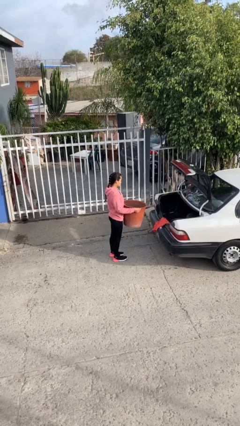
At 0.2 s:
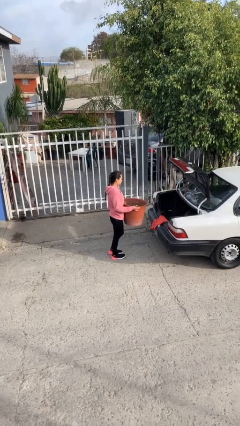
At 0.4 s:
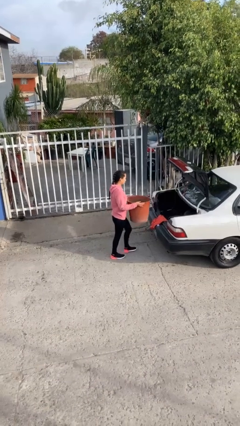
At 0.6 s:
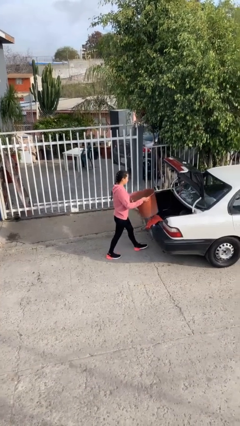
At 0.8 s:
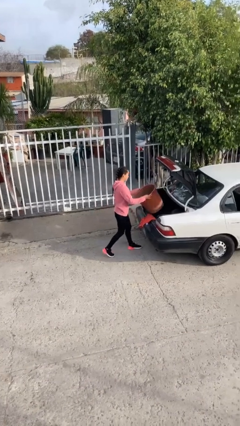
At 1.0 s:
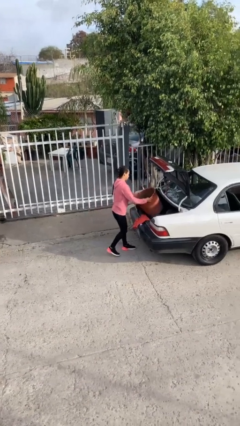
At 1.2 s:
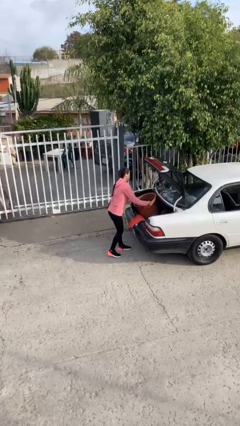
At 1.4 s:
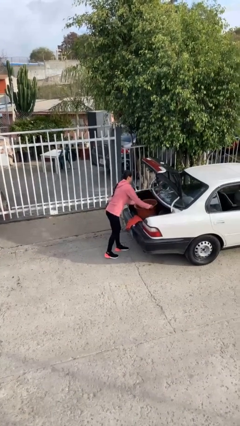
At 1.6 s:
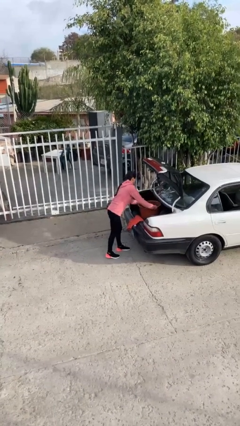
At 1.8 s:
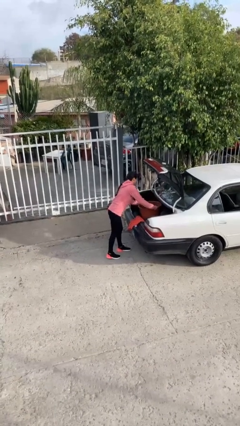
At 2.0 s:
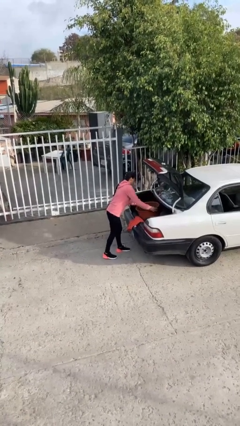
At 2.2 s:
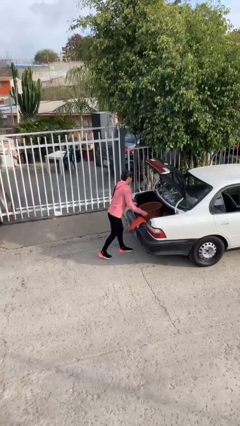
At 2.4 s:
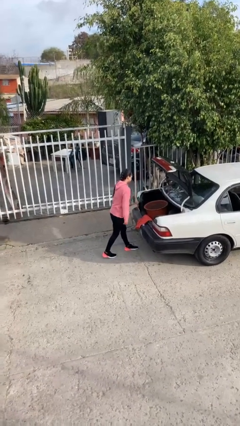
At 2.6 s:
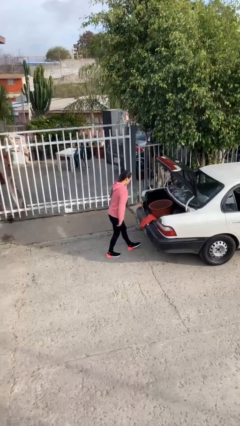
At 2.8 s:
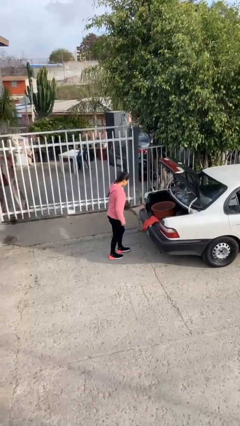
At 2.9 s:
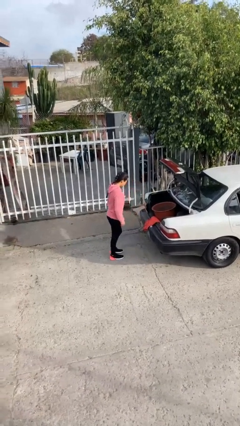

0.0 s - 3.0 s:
person loads car

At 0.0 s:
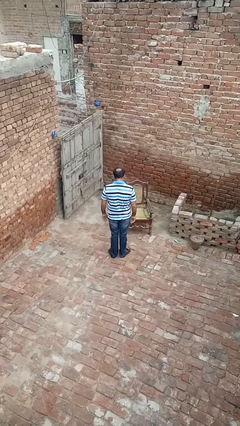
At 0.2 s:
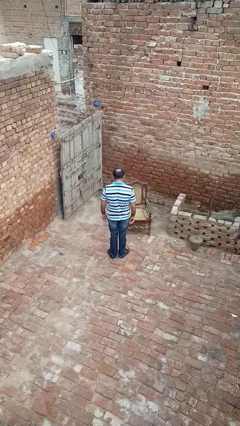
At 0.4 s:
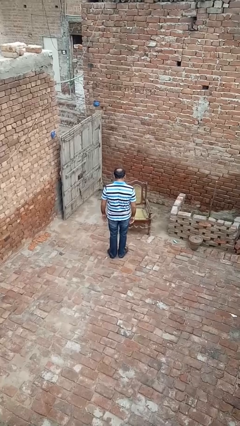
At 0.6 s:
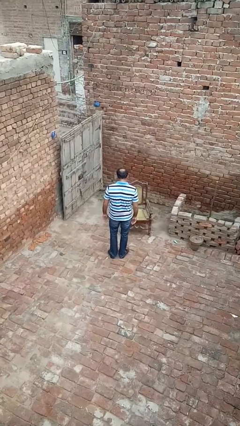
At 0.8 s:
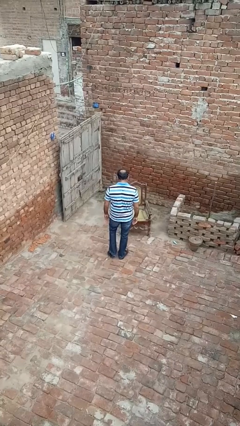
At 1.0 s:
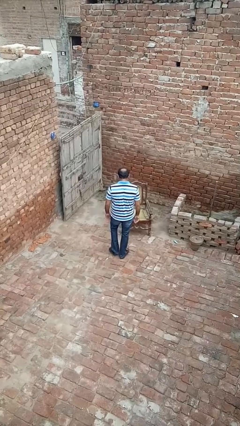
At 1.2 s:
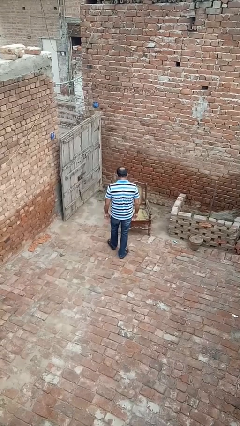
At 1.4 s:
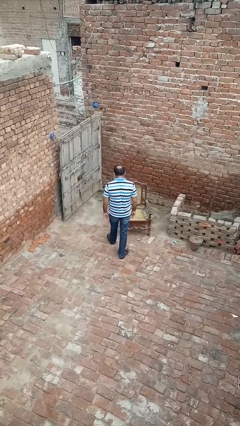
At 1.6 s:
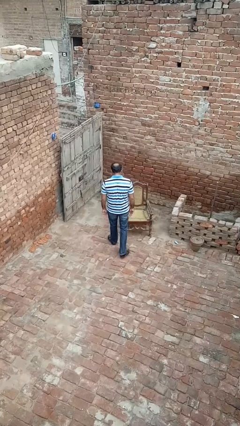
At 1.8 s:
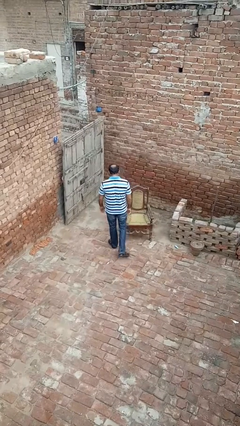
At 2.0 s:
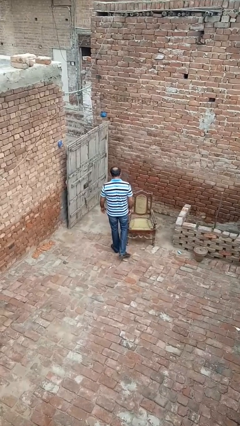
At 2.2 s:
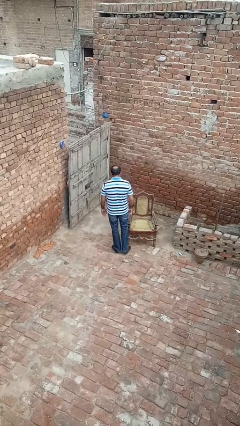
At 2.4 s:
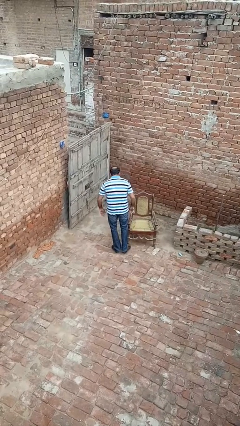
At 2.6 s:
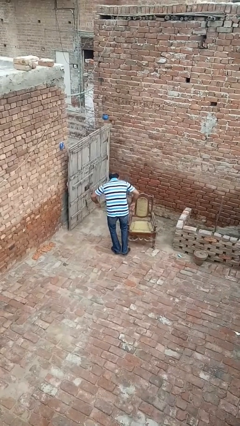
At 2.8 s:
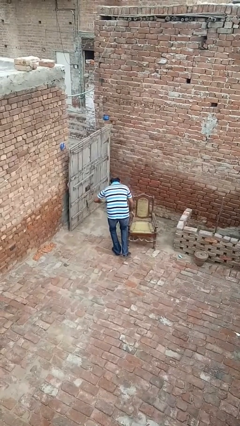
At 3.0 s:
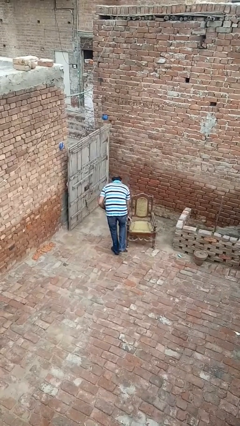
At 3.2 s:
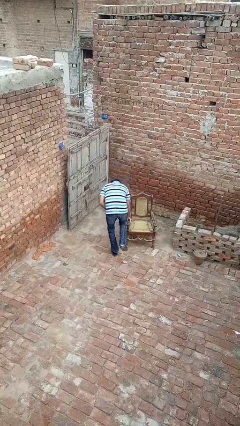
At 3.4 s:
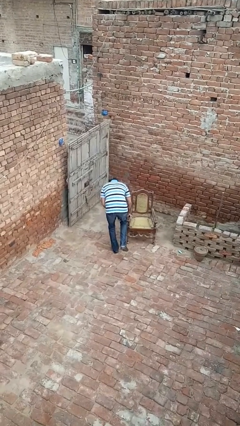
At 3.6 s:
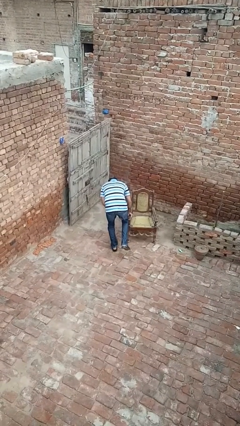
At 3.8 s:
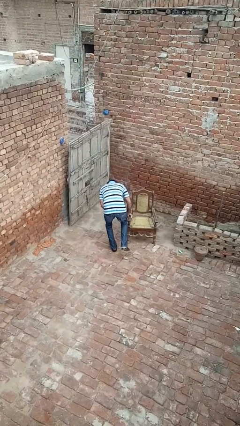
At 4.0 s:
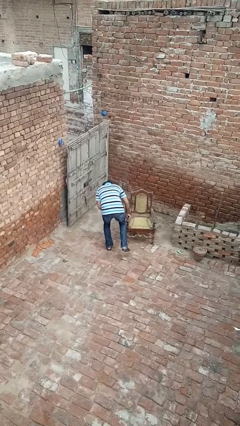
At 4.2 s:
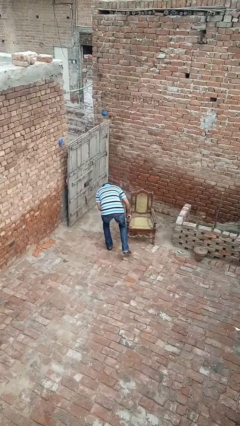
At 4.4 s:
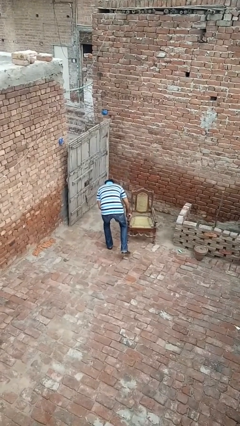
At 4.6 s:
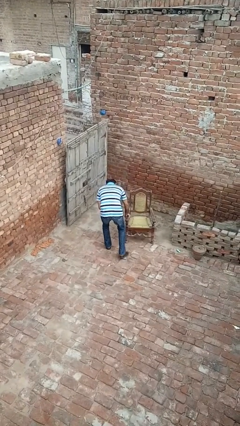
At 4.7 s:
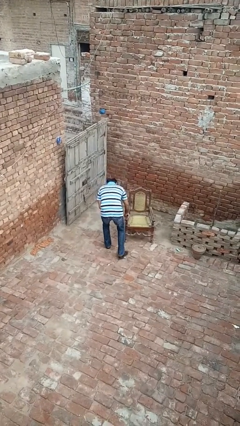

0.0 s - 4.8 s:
person stubs toe

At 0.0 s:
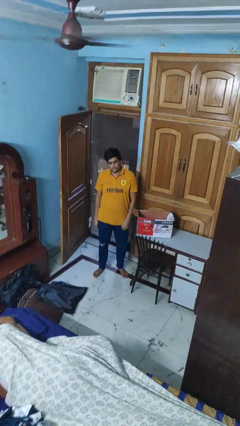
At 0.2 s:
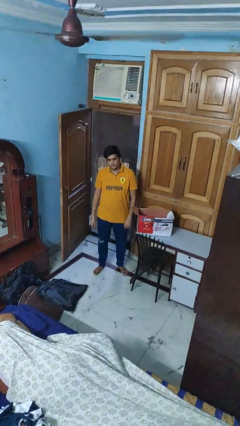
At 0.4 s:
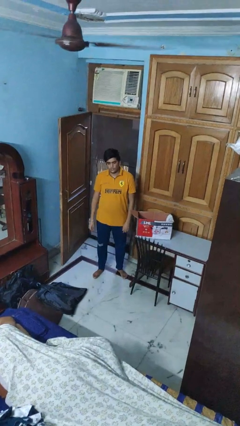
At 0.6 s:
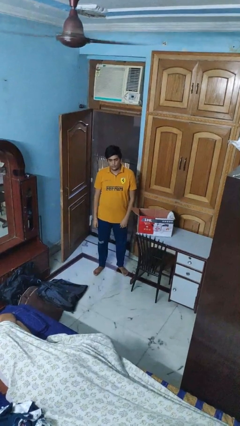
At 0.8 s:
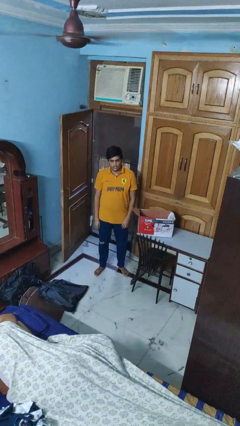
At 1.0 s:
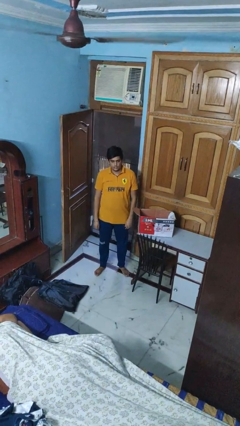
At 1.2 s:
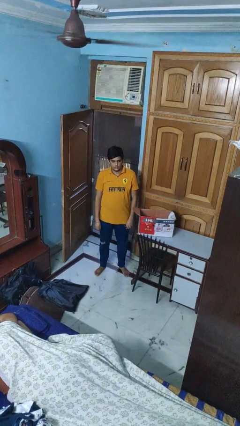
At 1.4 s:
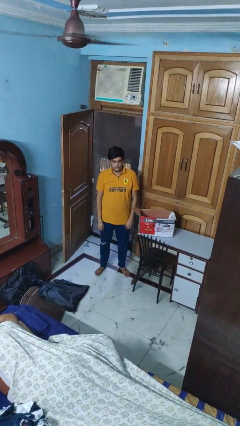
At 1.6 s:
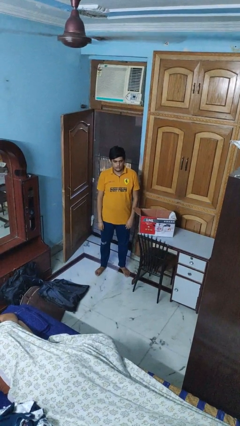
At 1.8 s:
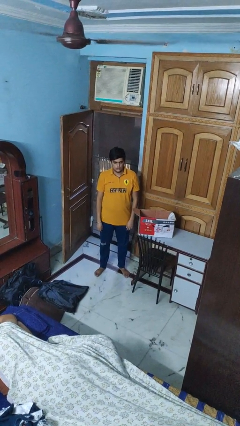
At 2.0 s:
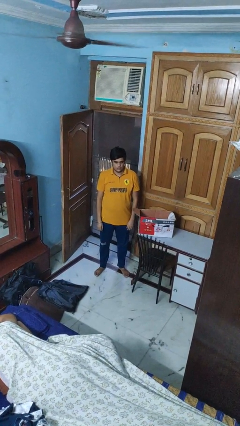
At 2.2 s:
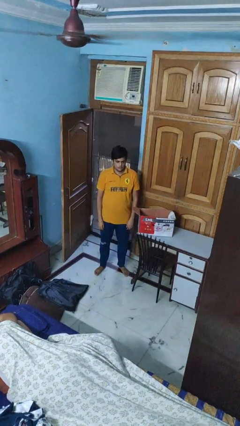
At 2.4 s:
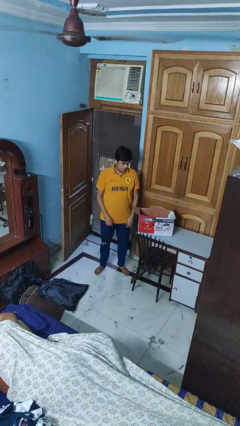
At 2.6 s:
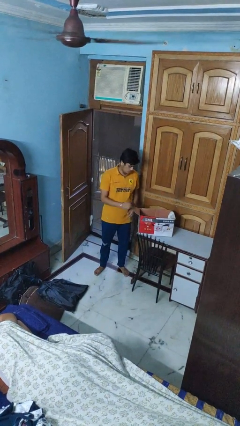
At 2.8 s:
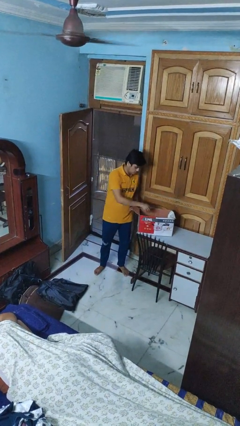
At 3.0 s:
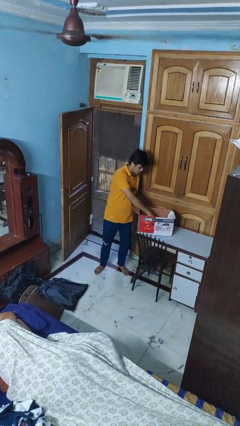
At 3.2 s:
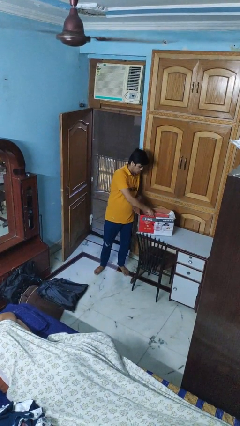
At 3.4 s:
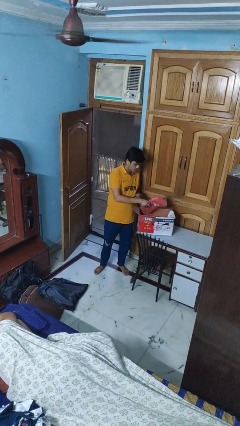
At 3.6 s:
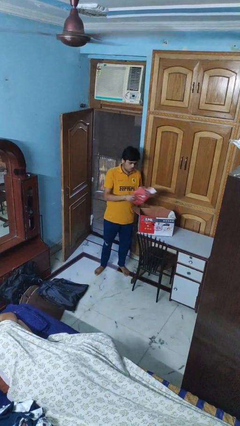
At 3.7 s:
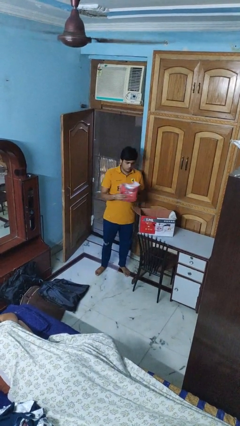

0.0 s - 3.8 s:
person takes object from box

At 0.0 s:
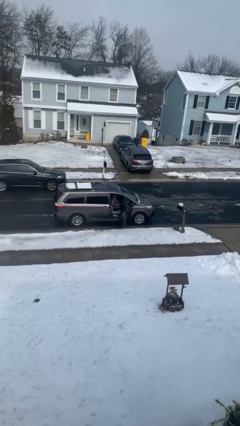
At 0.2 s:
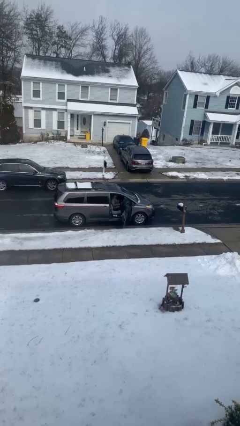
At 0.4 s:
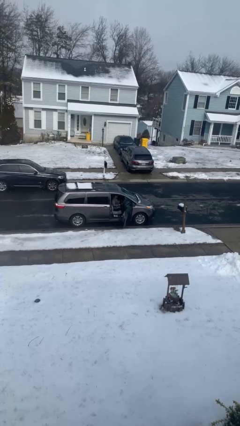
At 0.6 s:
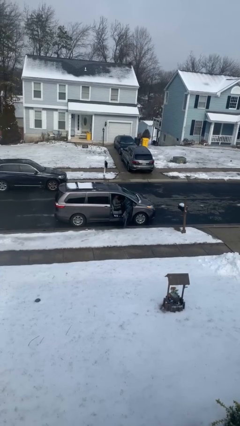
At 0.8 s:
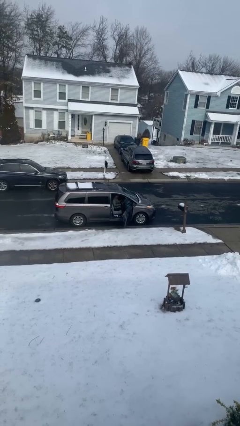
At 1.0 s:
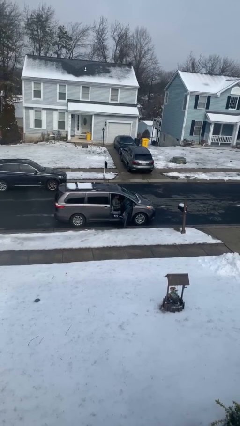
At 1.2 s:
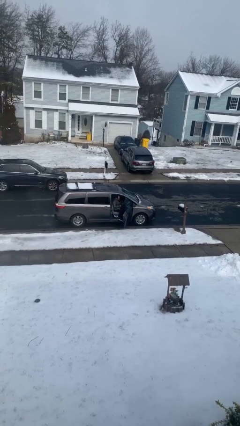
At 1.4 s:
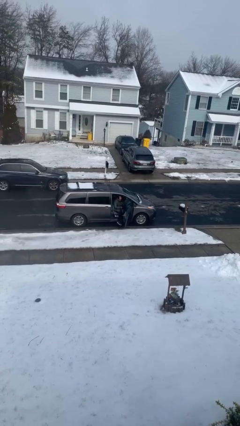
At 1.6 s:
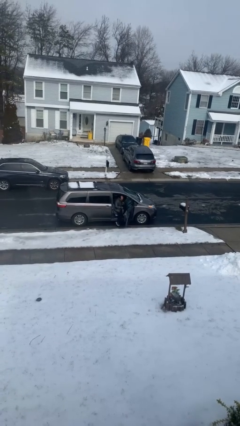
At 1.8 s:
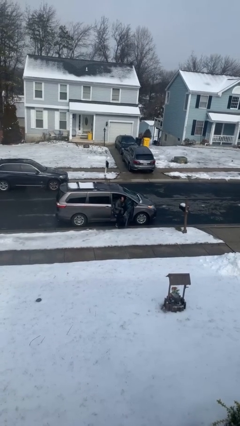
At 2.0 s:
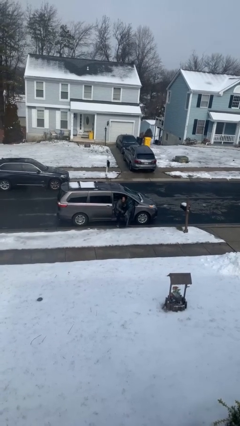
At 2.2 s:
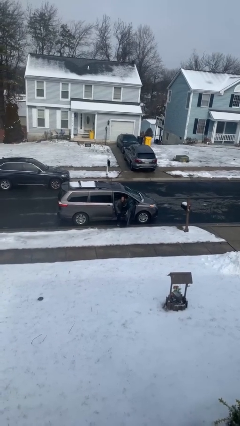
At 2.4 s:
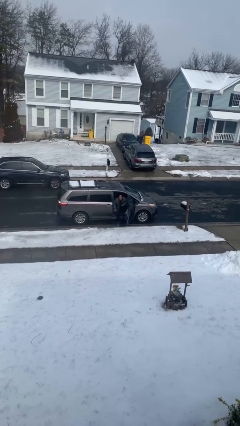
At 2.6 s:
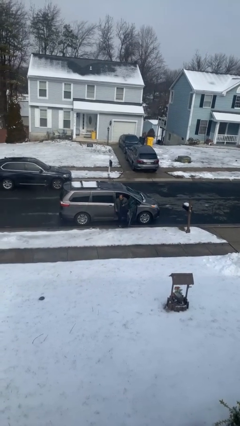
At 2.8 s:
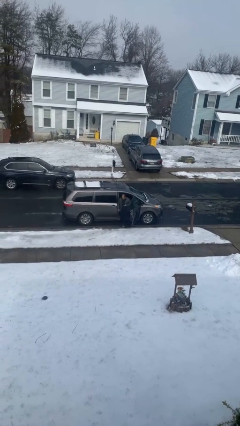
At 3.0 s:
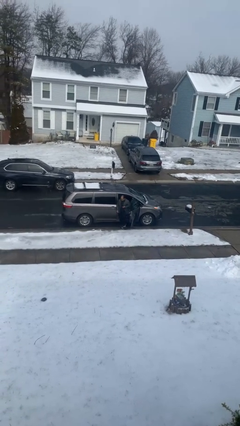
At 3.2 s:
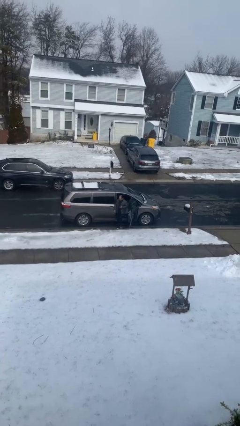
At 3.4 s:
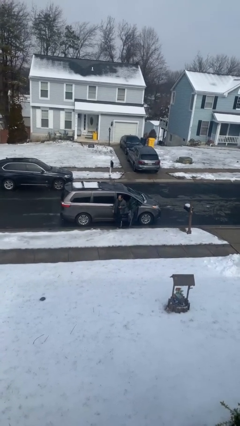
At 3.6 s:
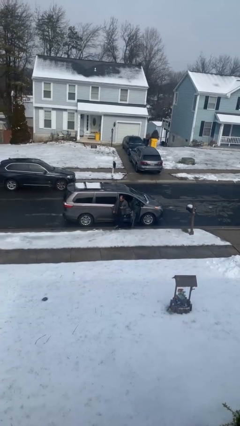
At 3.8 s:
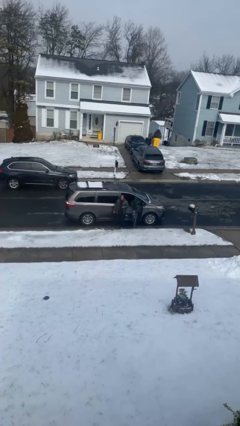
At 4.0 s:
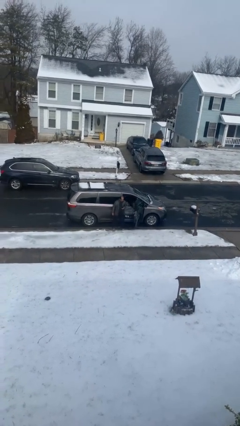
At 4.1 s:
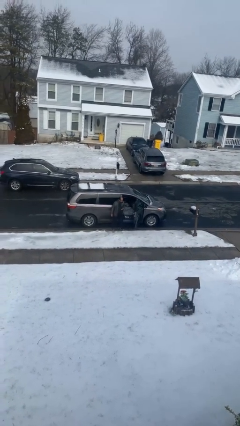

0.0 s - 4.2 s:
person exits car

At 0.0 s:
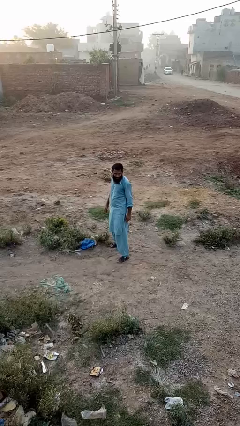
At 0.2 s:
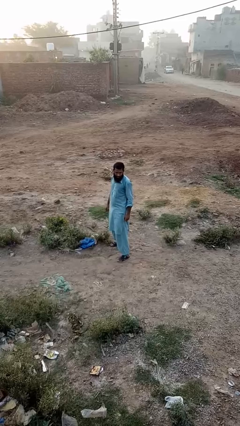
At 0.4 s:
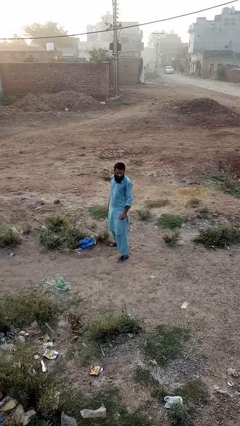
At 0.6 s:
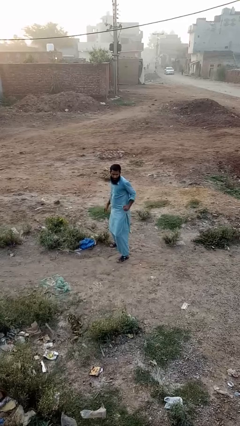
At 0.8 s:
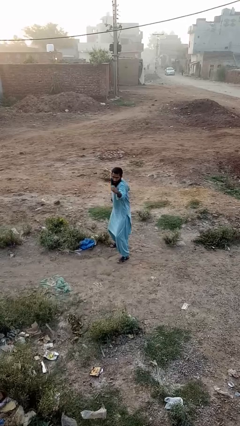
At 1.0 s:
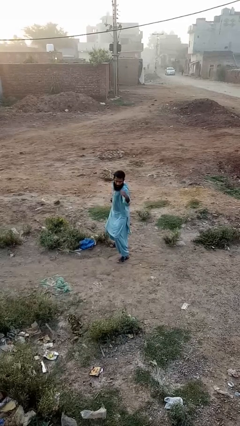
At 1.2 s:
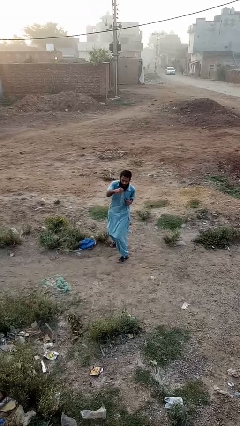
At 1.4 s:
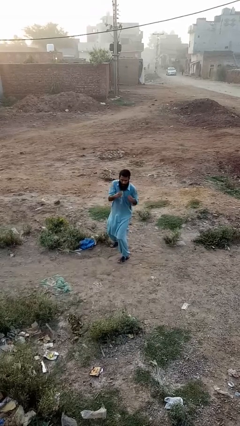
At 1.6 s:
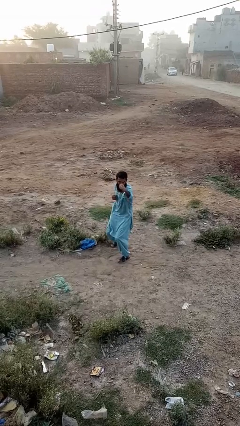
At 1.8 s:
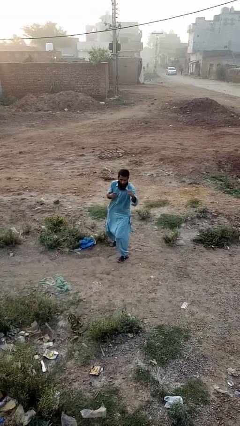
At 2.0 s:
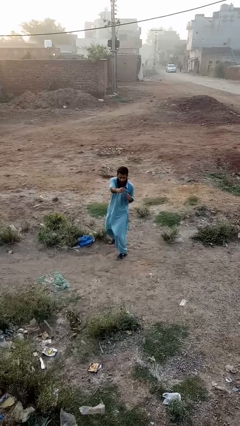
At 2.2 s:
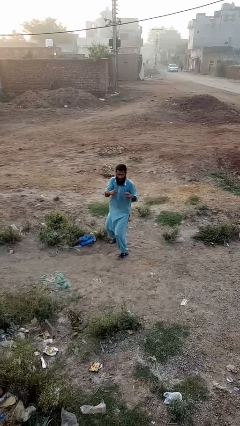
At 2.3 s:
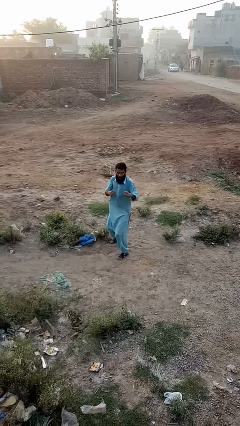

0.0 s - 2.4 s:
person punches
